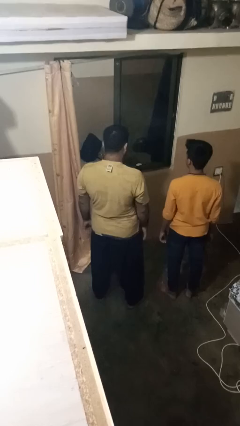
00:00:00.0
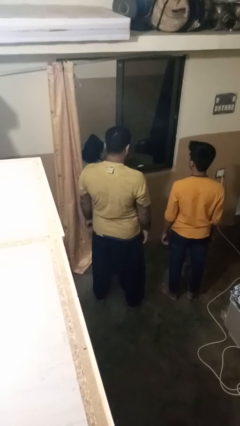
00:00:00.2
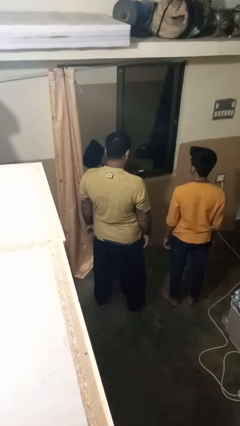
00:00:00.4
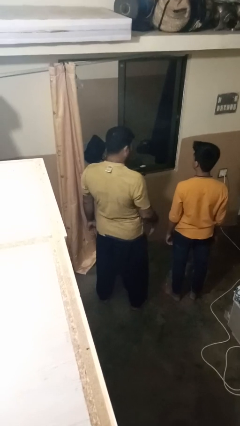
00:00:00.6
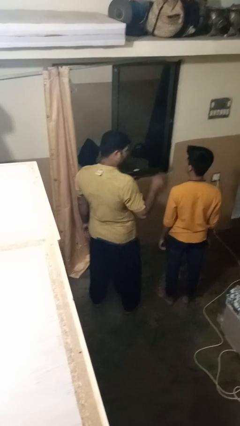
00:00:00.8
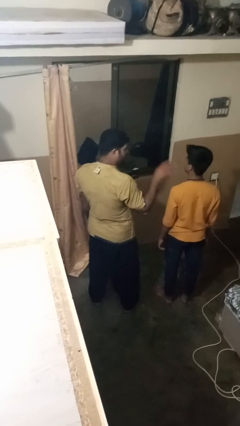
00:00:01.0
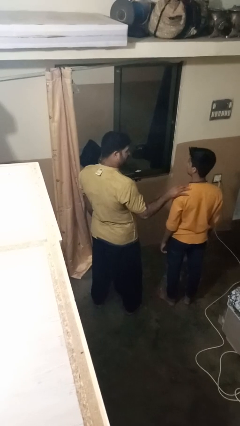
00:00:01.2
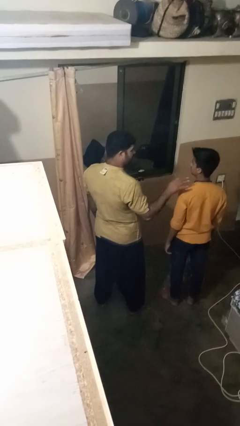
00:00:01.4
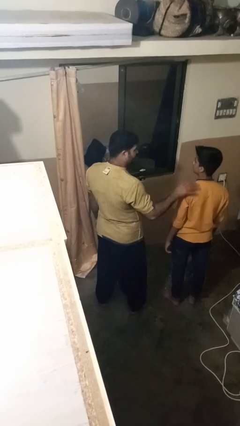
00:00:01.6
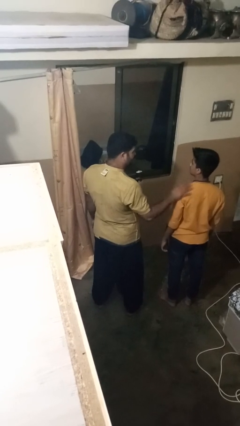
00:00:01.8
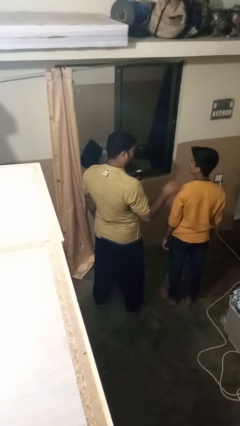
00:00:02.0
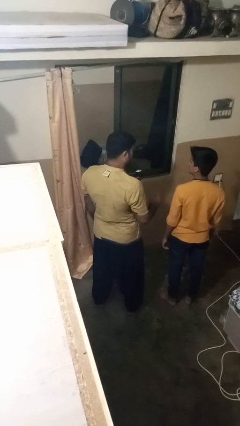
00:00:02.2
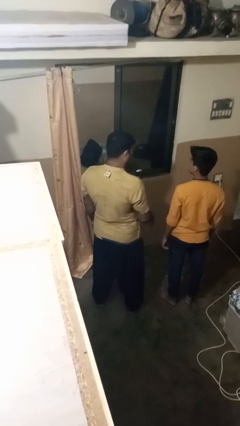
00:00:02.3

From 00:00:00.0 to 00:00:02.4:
person pounds shoulders of person

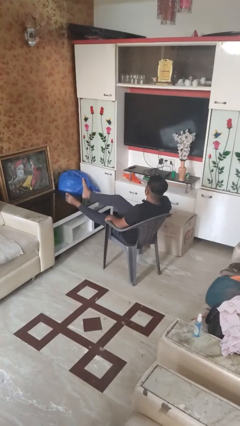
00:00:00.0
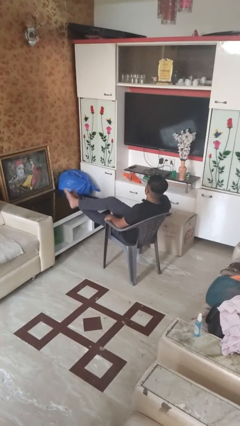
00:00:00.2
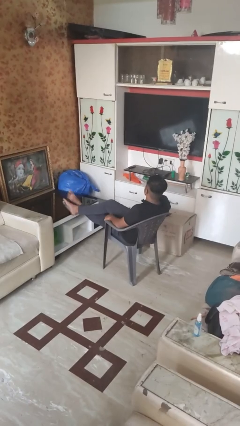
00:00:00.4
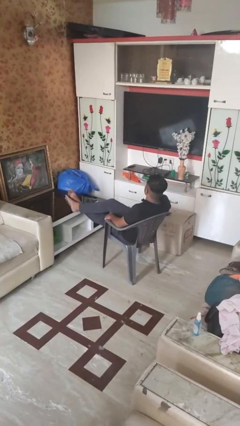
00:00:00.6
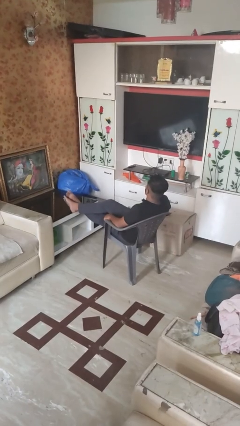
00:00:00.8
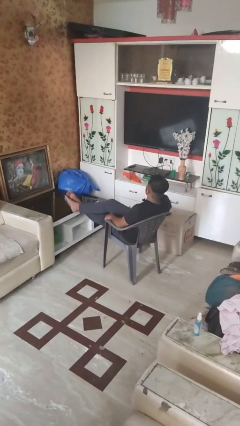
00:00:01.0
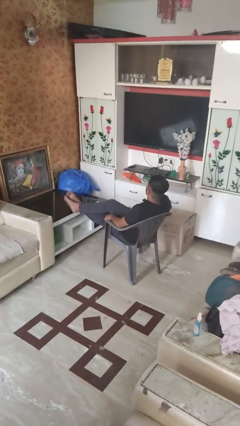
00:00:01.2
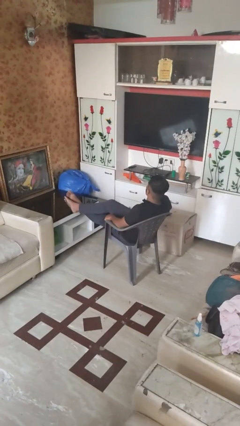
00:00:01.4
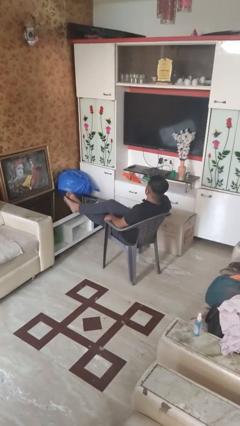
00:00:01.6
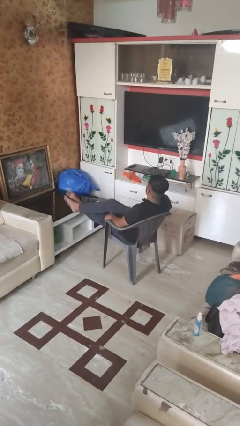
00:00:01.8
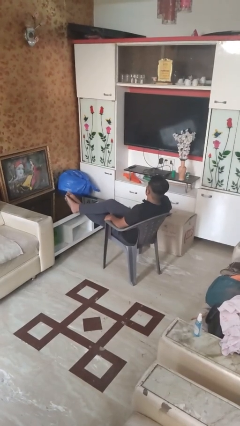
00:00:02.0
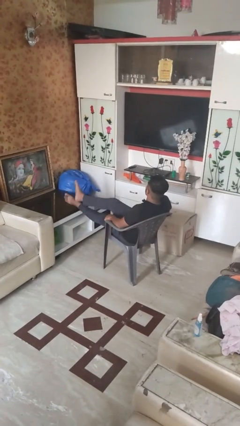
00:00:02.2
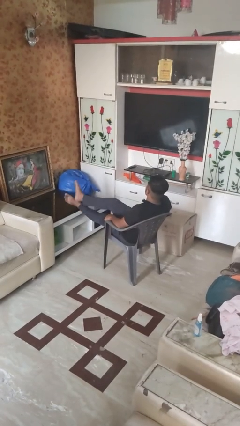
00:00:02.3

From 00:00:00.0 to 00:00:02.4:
person crosses legs

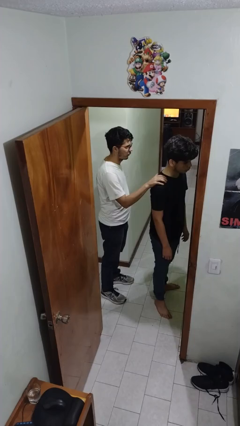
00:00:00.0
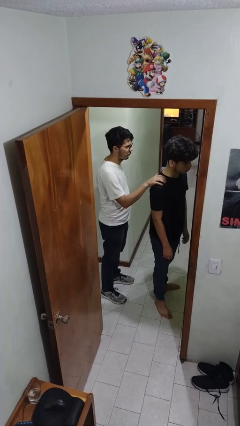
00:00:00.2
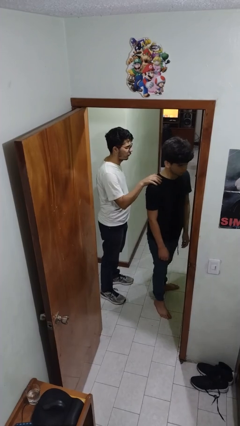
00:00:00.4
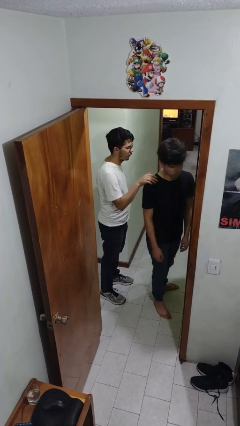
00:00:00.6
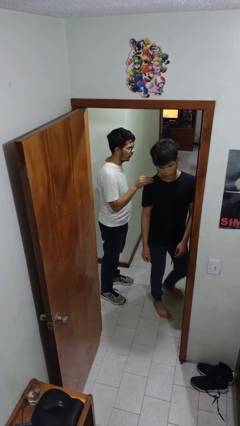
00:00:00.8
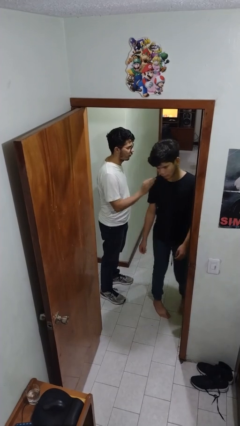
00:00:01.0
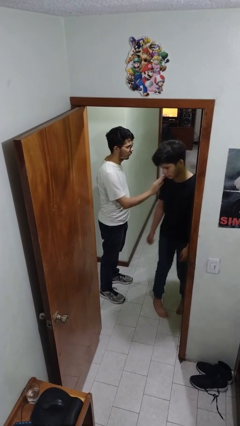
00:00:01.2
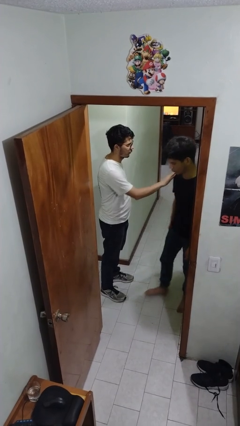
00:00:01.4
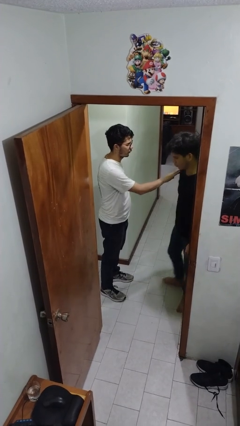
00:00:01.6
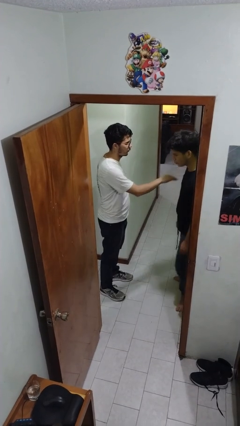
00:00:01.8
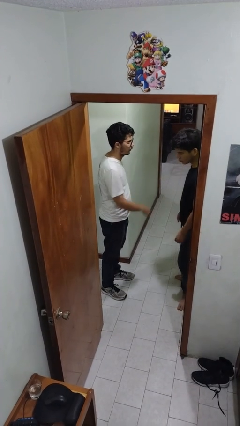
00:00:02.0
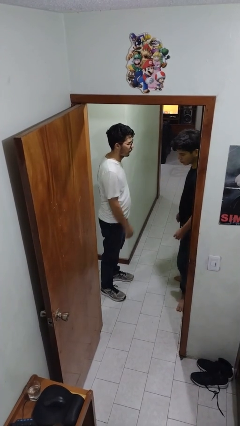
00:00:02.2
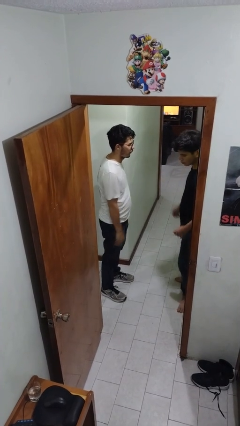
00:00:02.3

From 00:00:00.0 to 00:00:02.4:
person spins person around

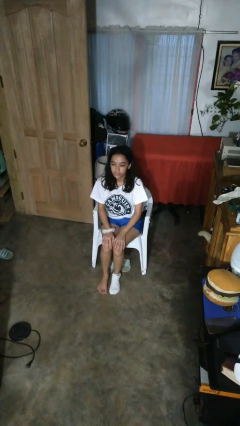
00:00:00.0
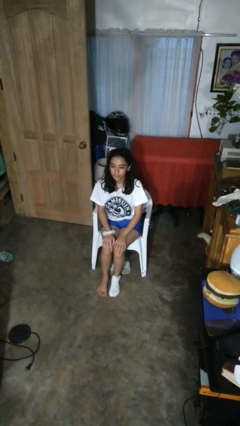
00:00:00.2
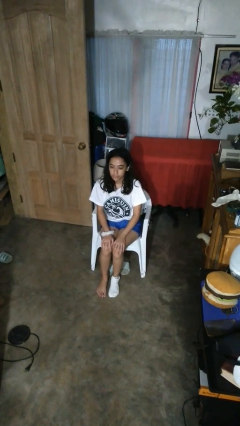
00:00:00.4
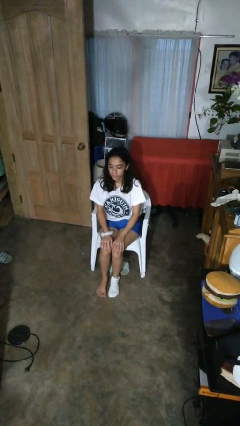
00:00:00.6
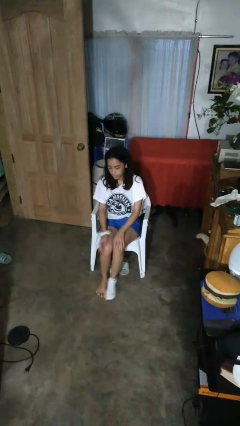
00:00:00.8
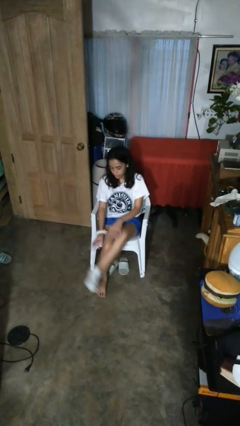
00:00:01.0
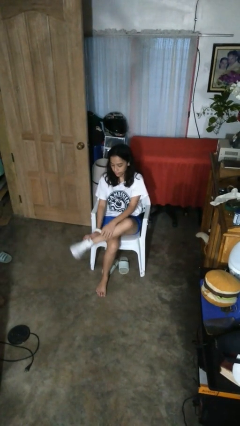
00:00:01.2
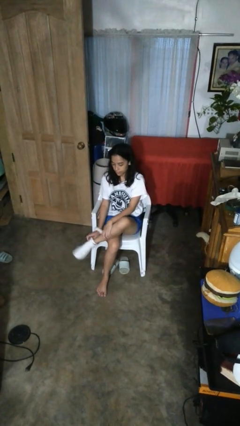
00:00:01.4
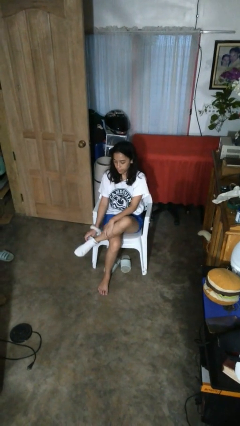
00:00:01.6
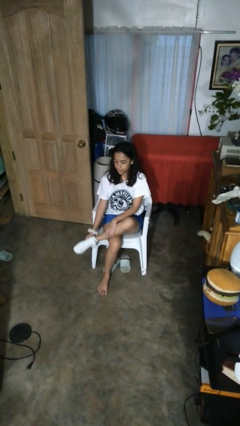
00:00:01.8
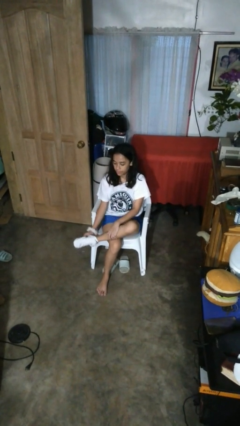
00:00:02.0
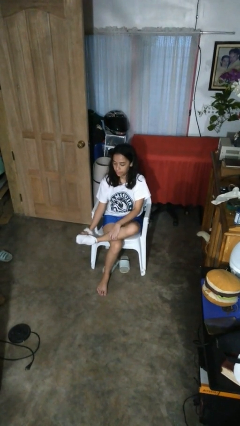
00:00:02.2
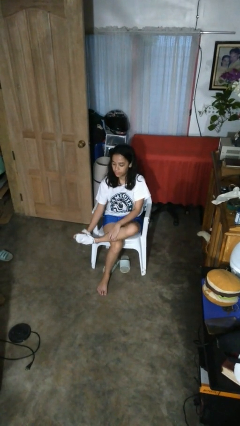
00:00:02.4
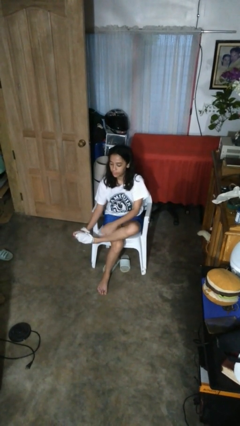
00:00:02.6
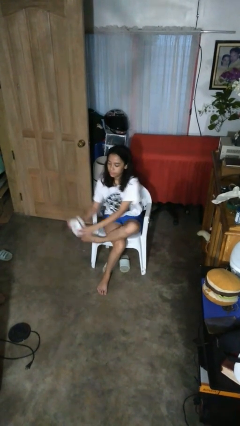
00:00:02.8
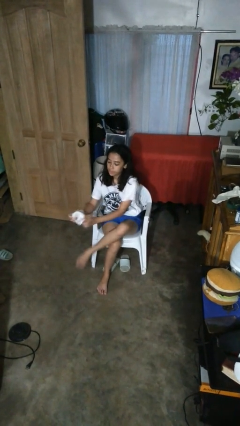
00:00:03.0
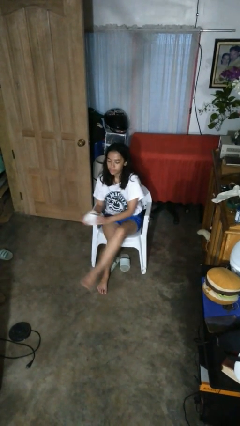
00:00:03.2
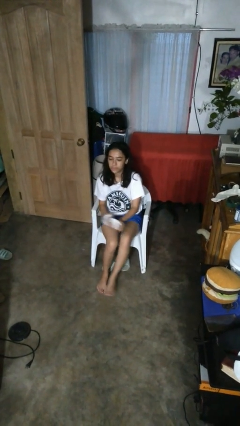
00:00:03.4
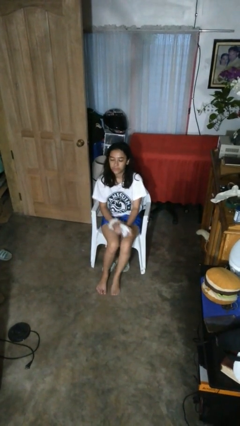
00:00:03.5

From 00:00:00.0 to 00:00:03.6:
person takes off socks

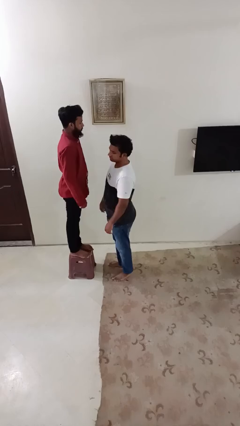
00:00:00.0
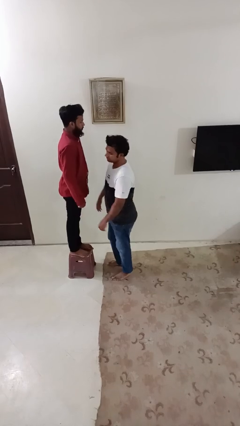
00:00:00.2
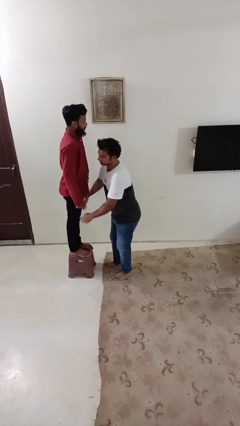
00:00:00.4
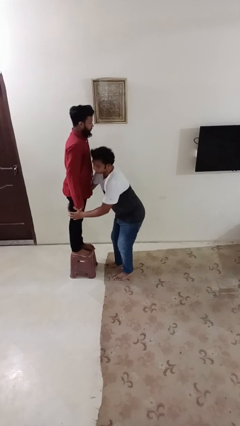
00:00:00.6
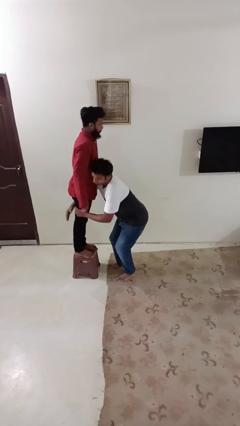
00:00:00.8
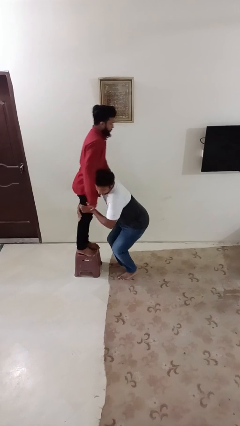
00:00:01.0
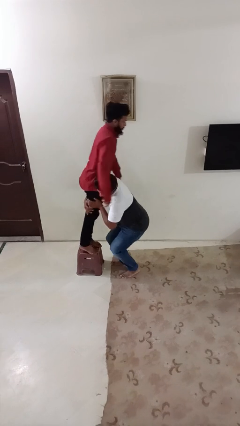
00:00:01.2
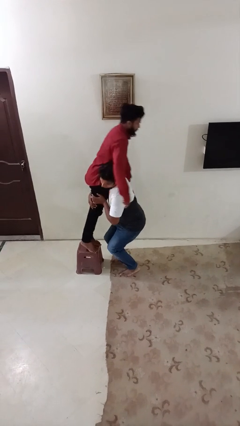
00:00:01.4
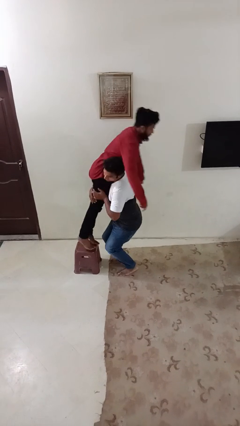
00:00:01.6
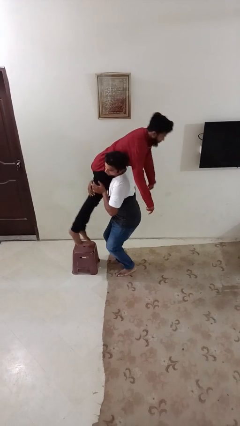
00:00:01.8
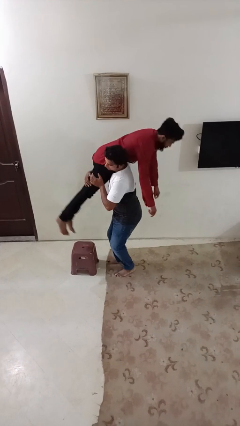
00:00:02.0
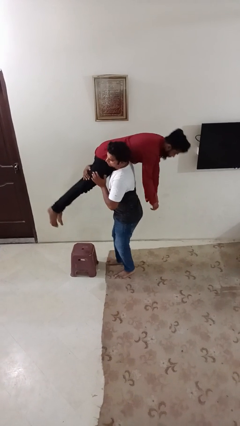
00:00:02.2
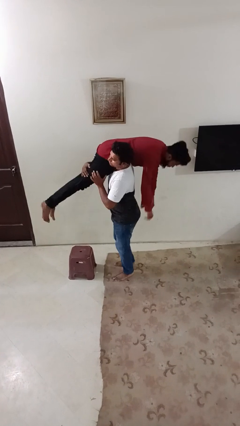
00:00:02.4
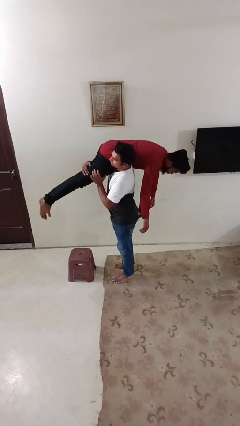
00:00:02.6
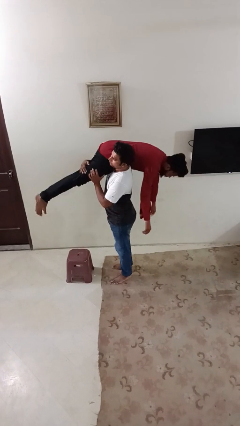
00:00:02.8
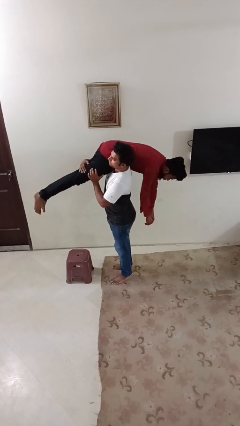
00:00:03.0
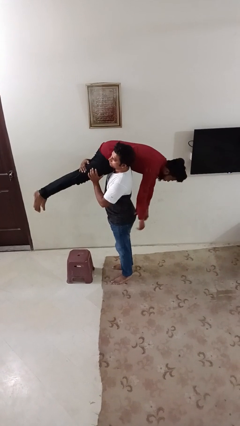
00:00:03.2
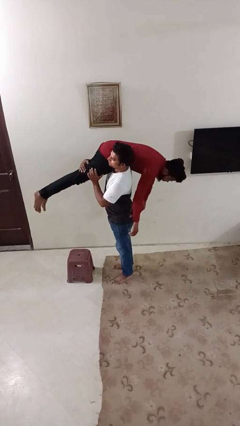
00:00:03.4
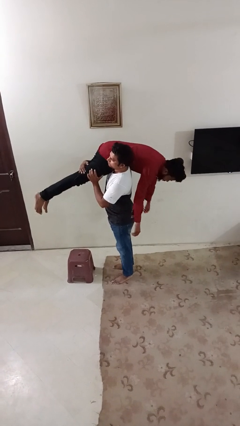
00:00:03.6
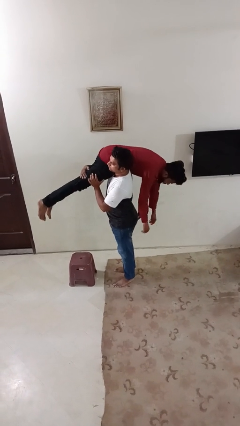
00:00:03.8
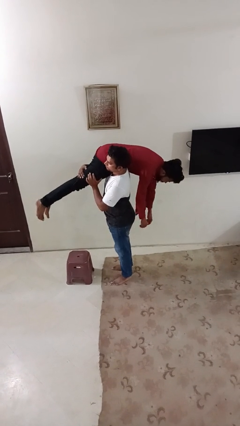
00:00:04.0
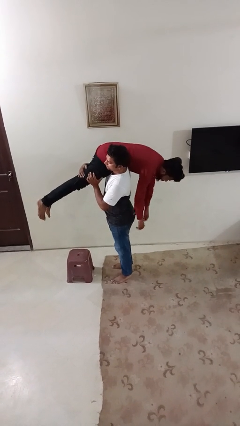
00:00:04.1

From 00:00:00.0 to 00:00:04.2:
person carries person over shoulder

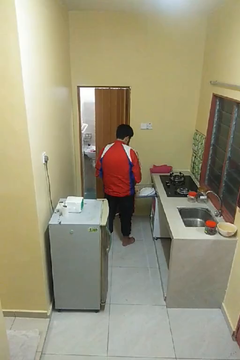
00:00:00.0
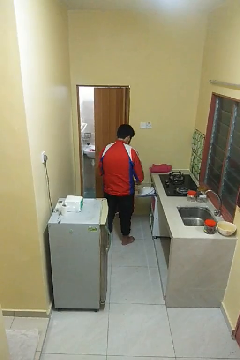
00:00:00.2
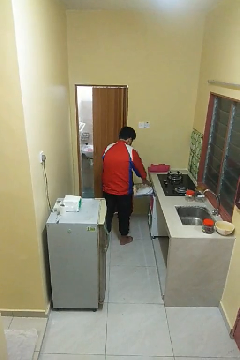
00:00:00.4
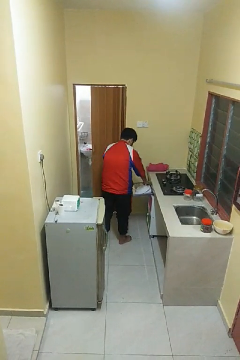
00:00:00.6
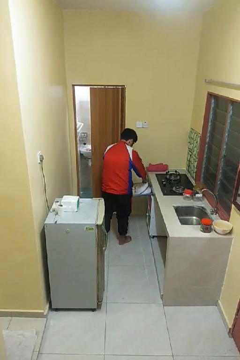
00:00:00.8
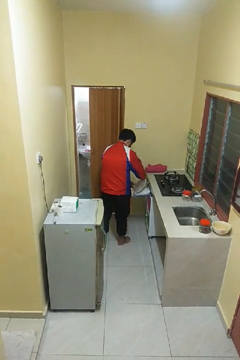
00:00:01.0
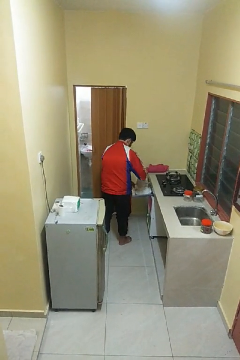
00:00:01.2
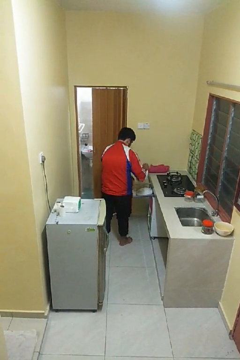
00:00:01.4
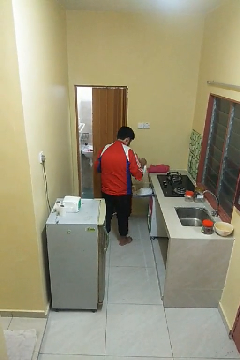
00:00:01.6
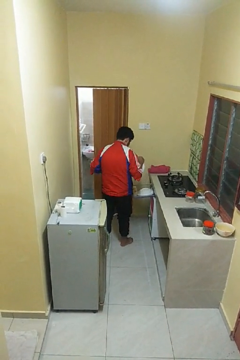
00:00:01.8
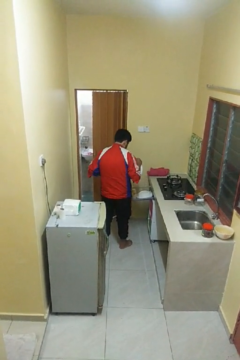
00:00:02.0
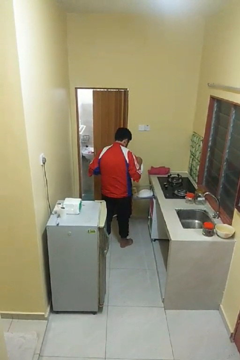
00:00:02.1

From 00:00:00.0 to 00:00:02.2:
person takes object from kitchen drawer

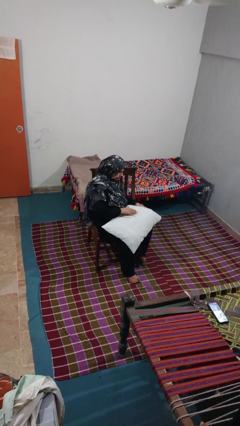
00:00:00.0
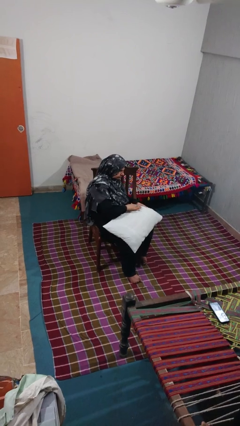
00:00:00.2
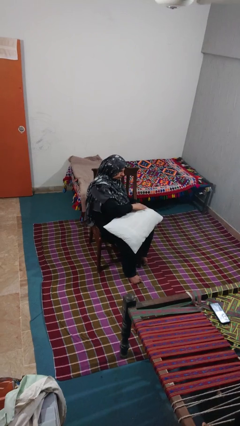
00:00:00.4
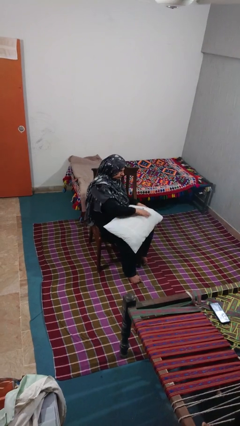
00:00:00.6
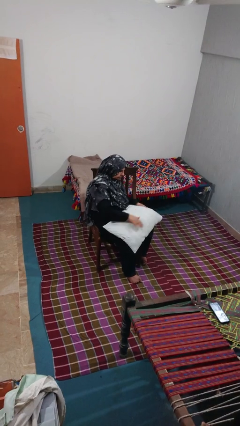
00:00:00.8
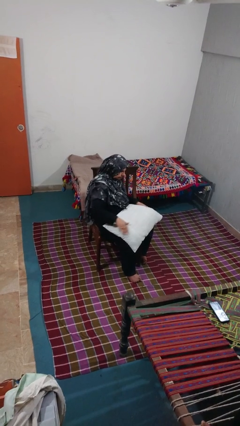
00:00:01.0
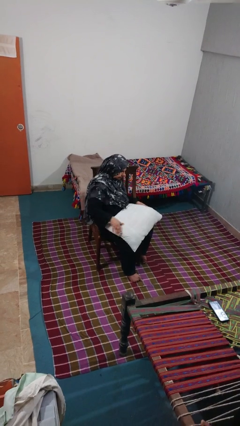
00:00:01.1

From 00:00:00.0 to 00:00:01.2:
person waves hand over object
